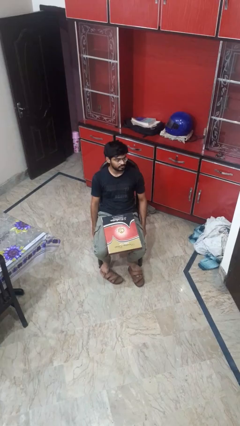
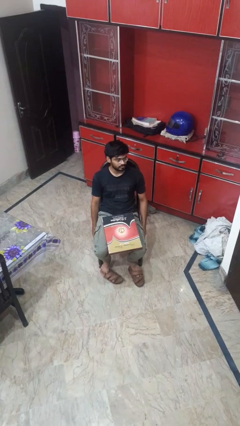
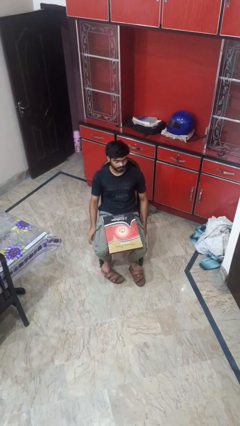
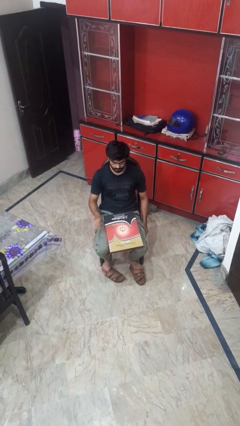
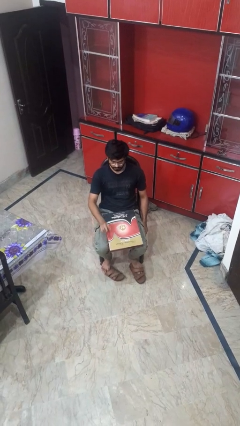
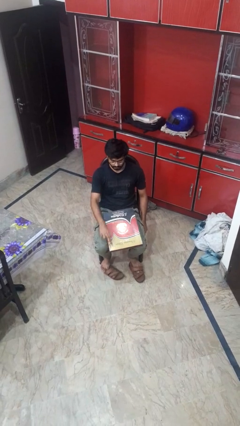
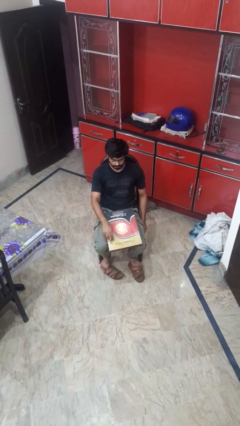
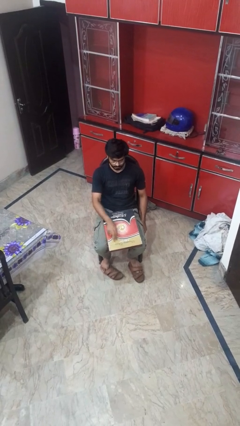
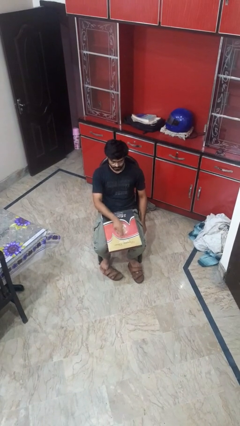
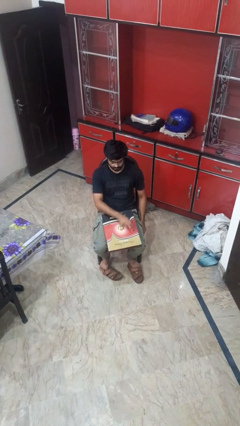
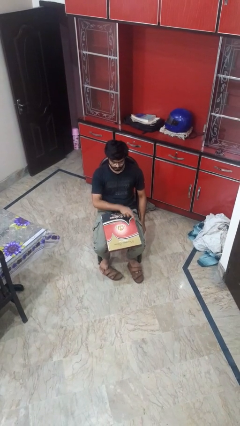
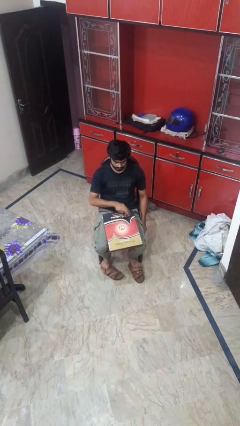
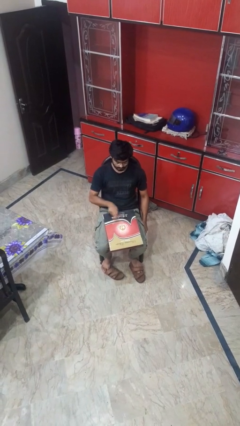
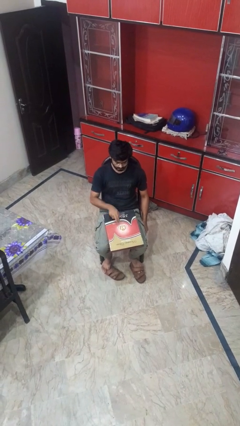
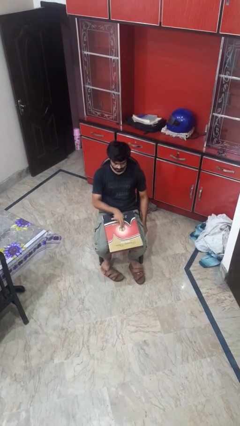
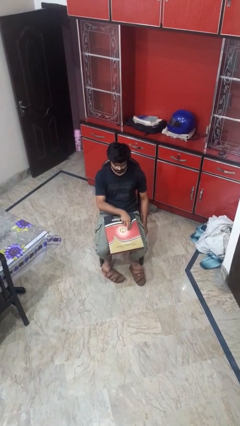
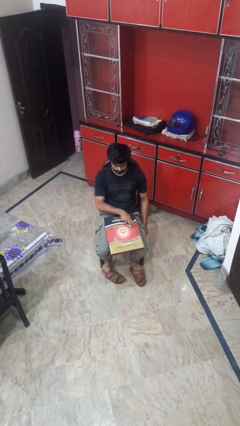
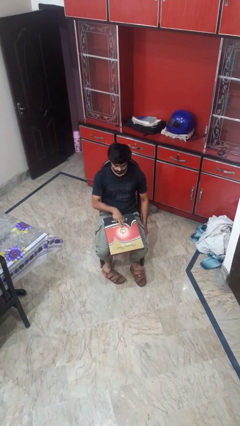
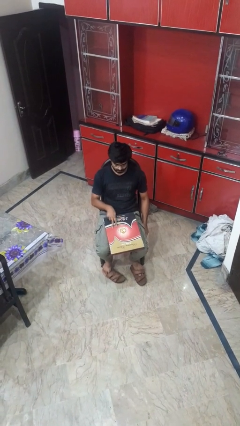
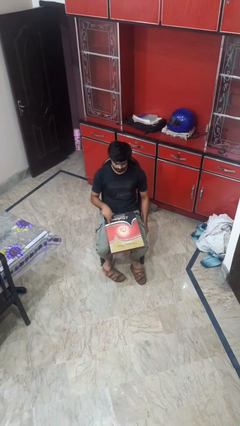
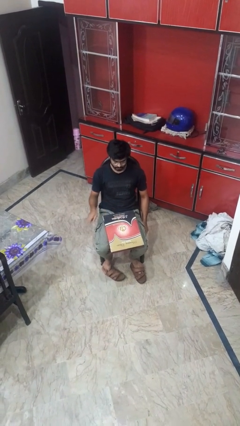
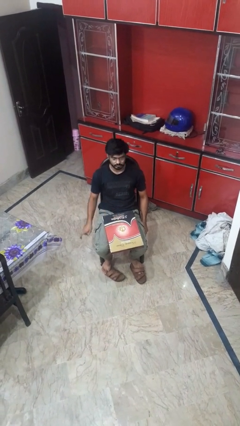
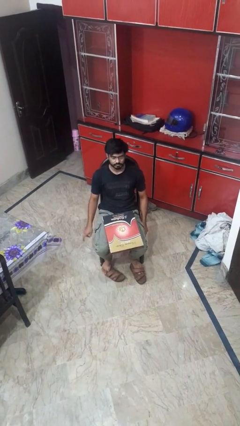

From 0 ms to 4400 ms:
person taps object with finger

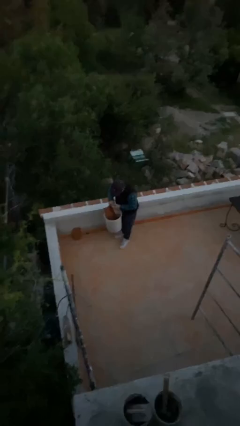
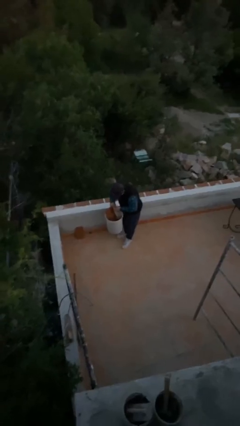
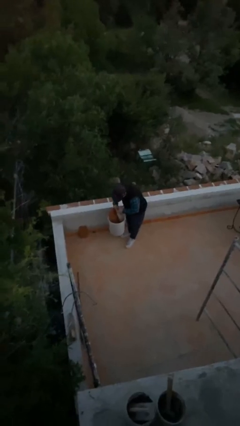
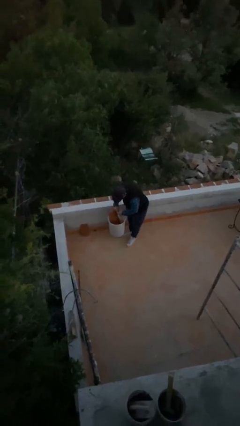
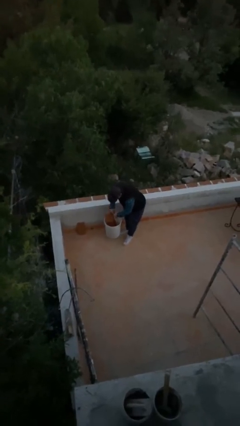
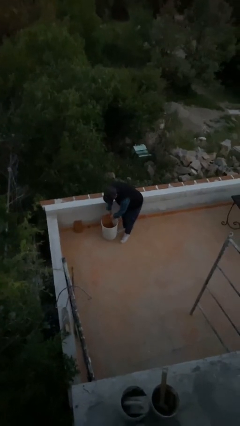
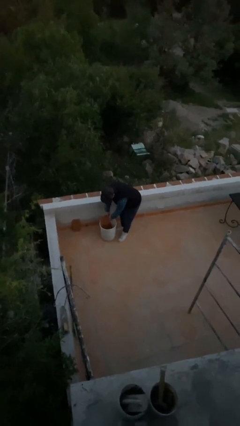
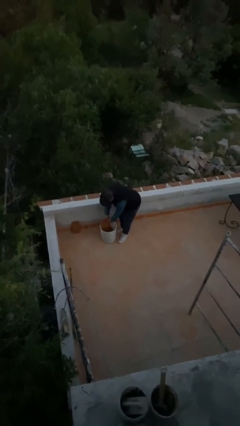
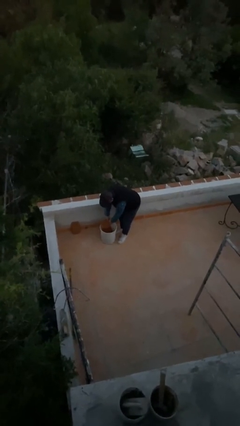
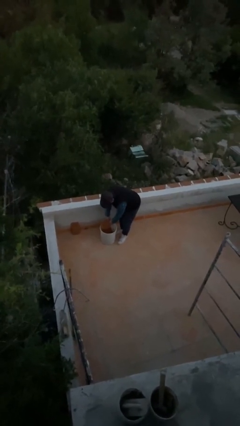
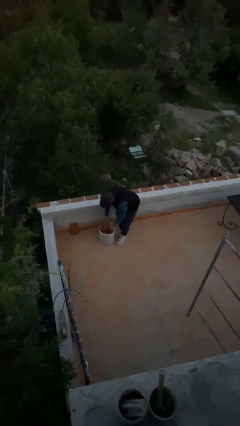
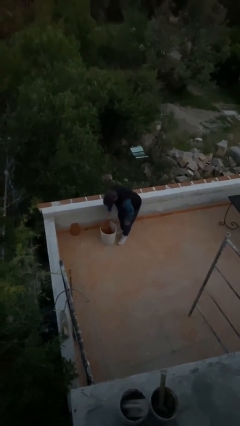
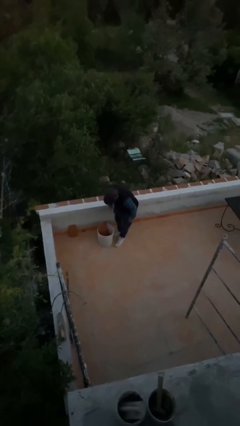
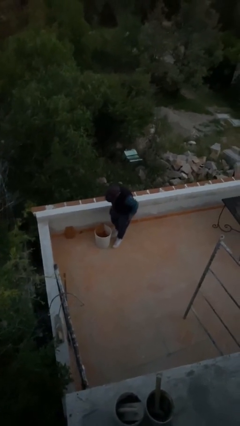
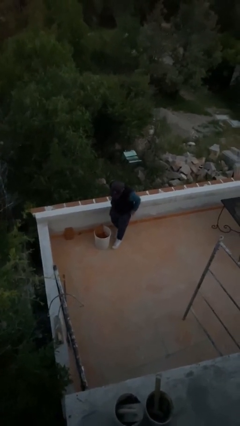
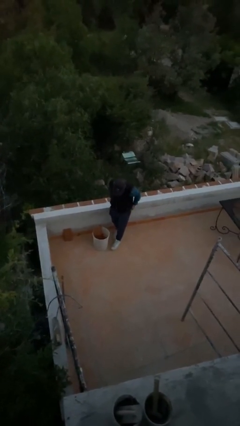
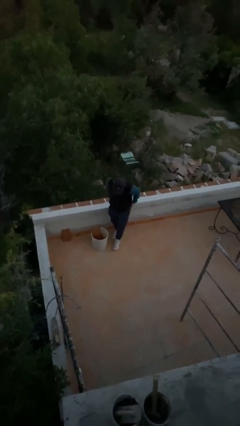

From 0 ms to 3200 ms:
person puts down object on floor

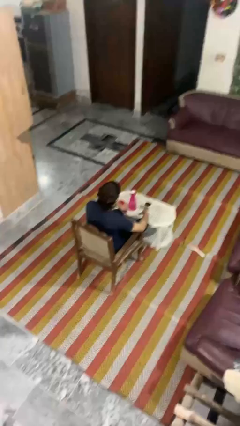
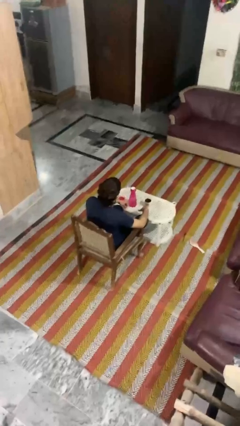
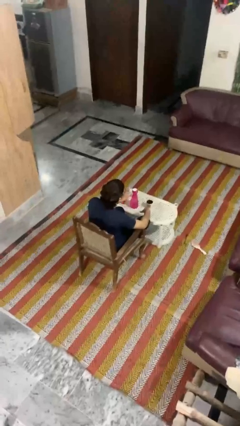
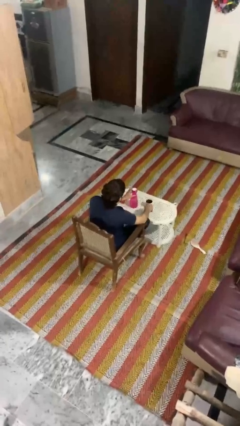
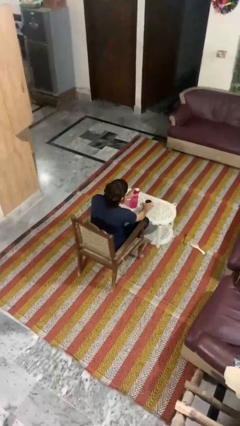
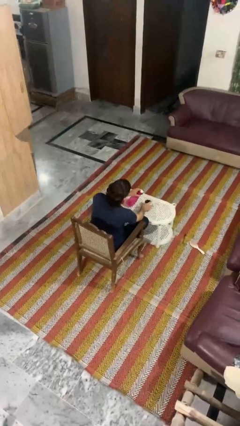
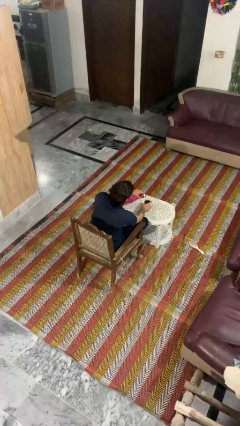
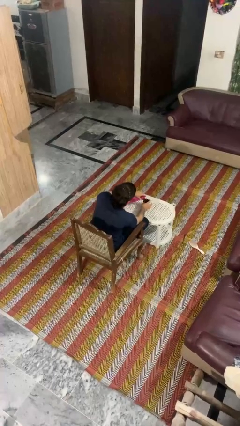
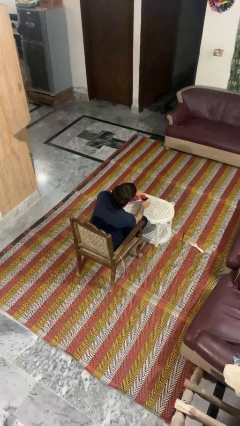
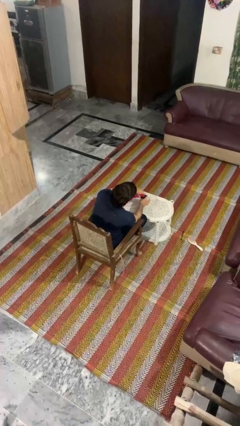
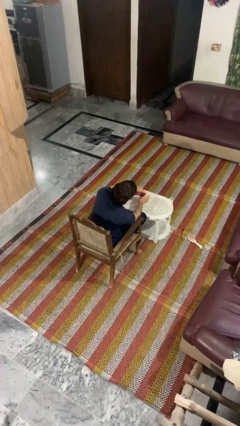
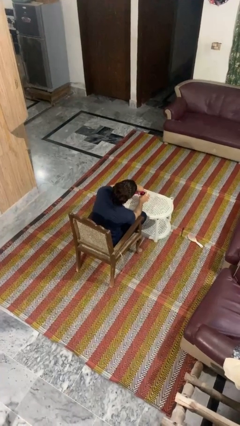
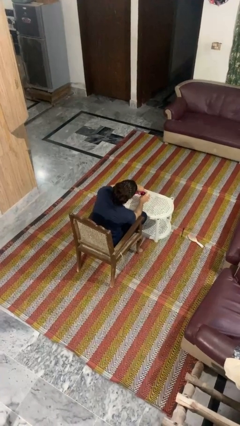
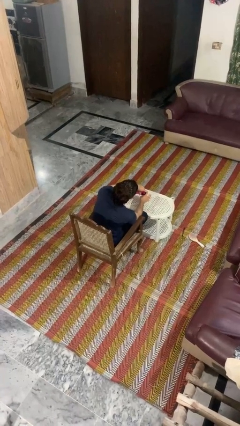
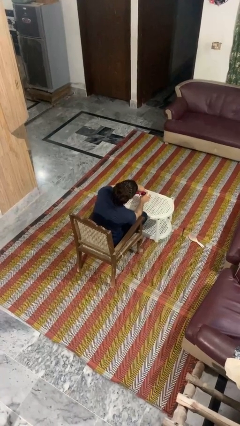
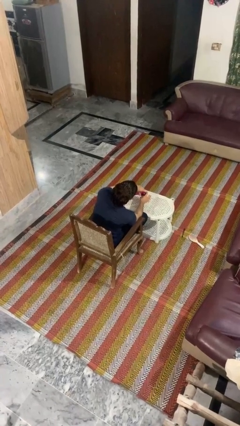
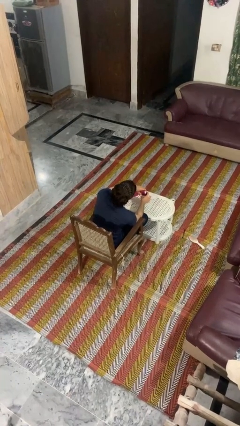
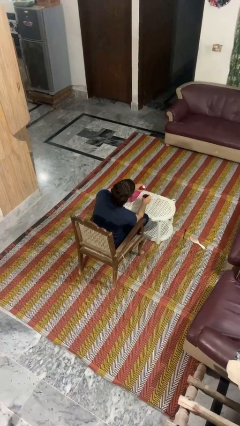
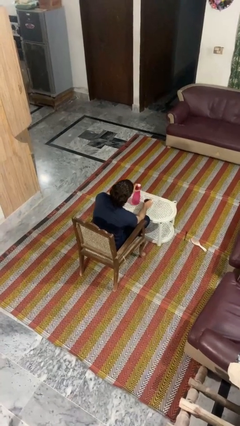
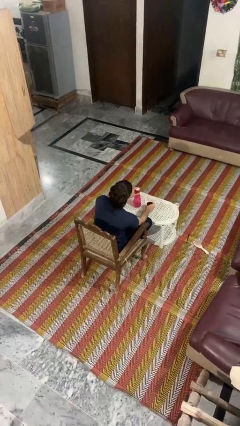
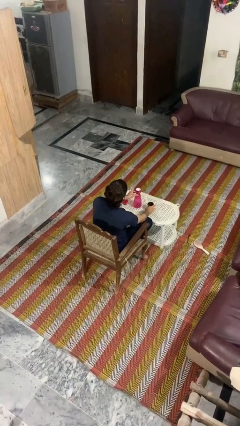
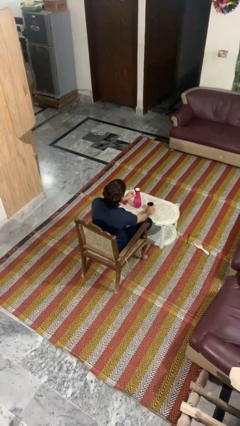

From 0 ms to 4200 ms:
person pours liquid into cup

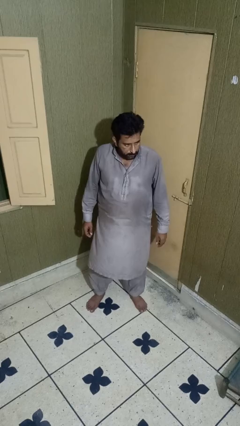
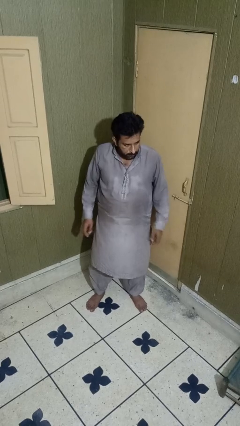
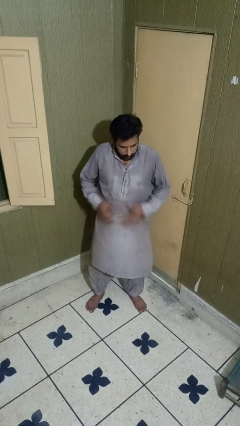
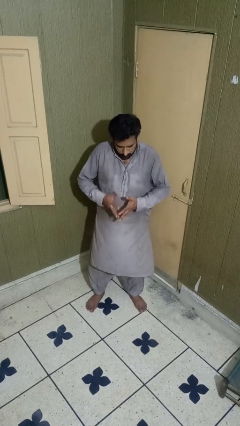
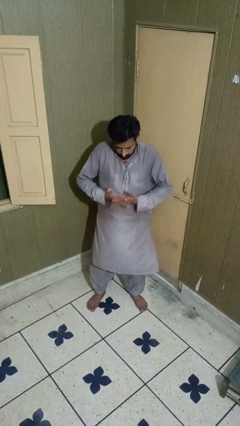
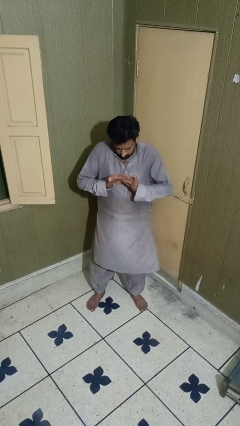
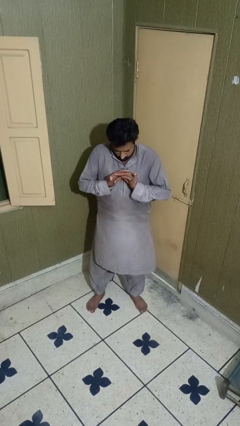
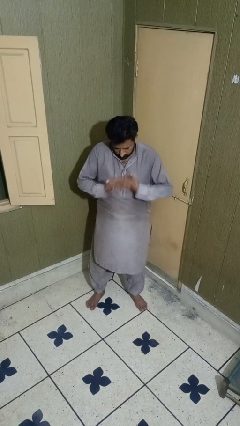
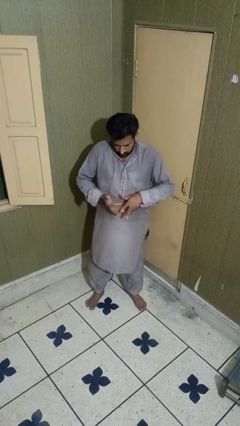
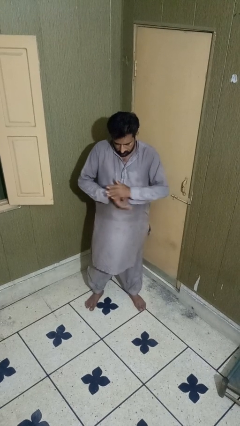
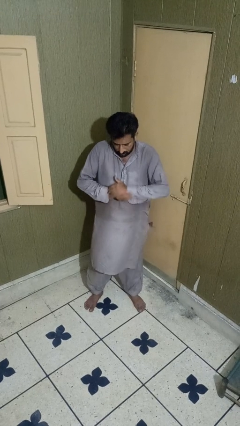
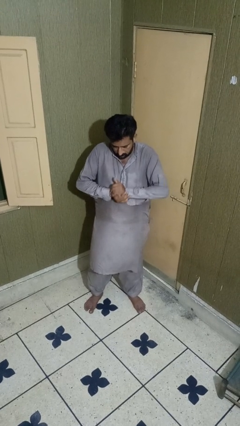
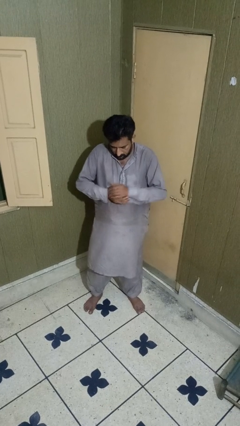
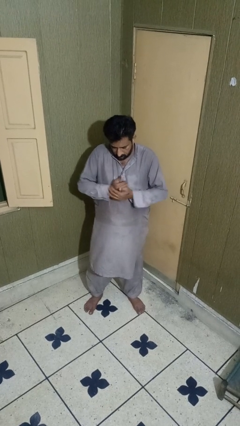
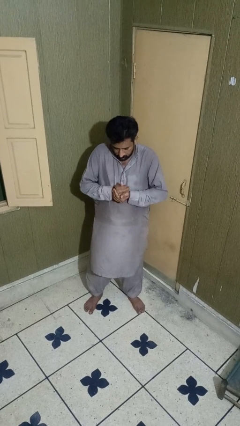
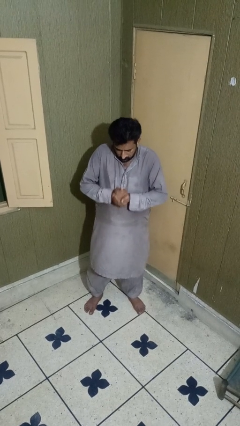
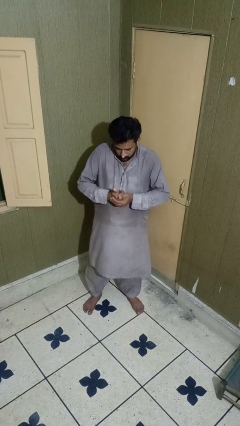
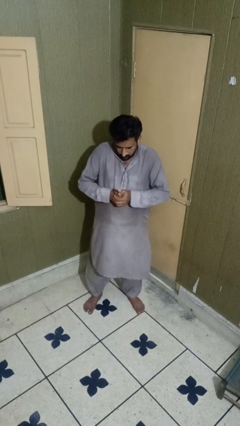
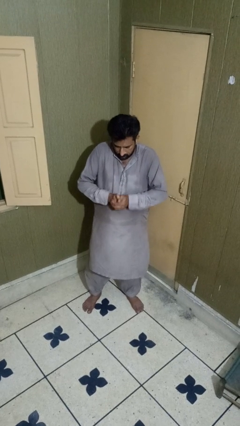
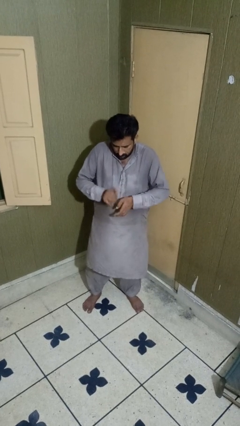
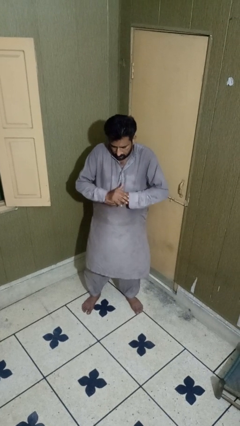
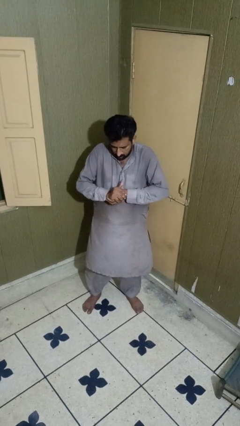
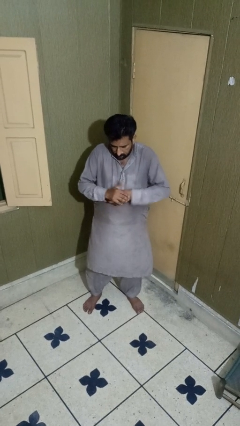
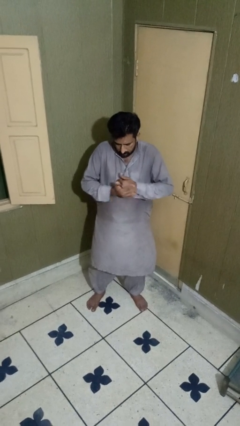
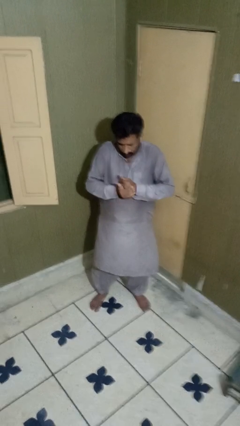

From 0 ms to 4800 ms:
person cracks knuckles

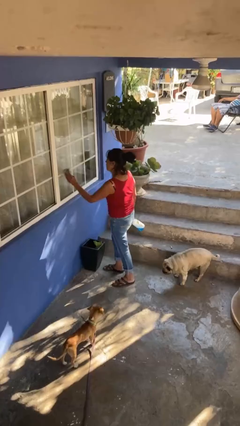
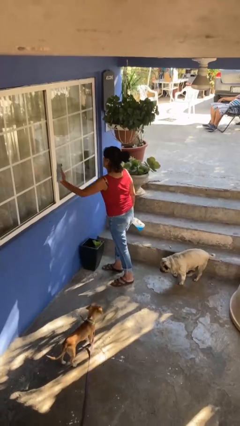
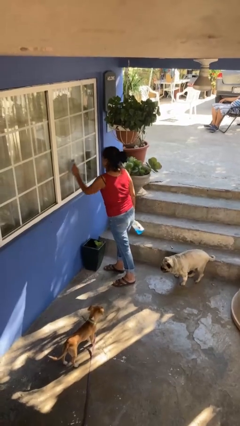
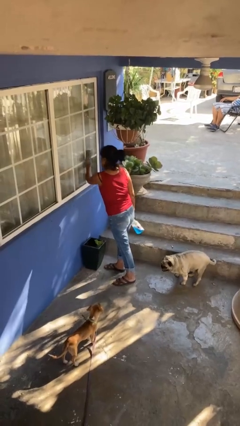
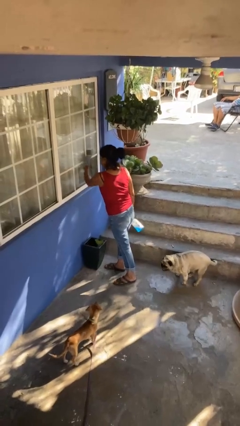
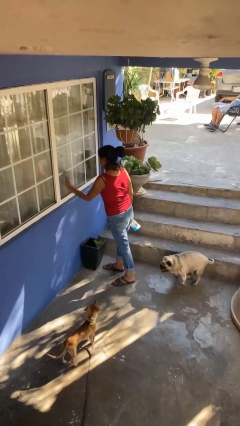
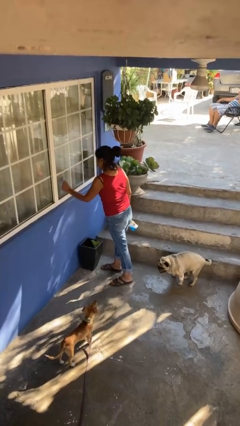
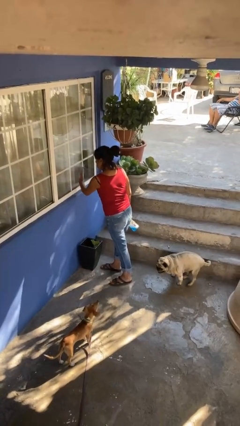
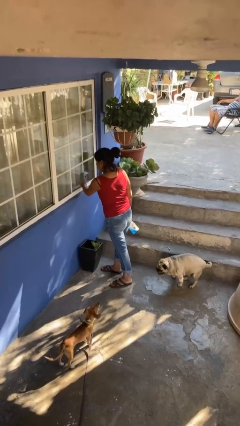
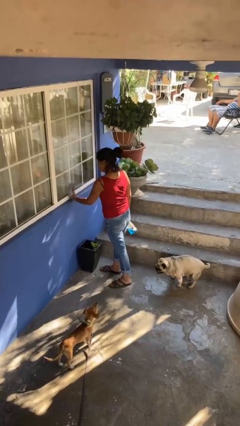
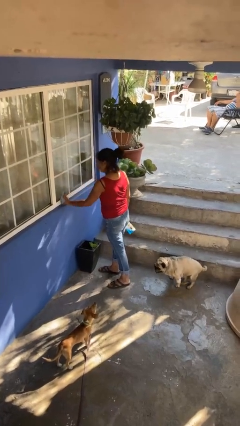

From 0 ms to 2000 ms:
person washes window
